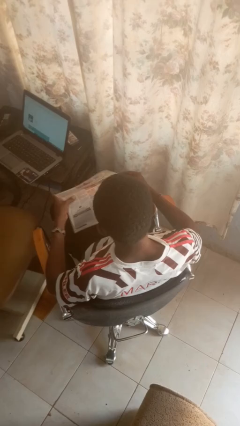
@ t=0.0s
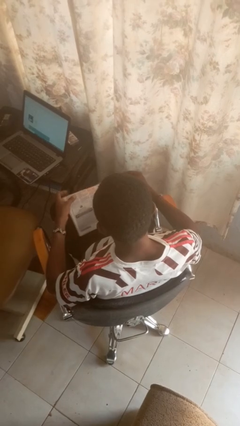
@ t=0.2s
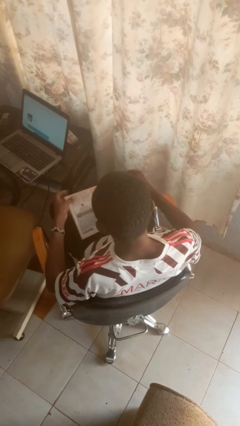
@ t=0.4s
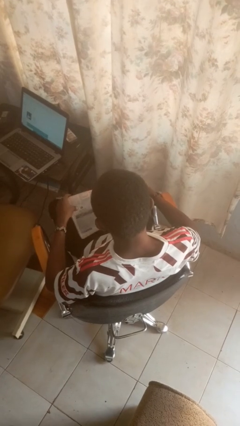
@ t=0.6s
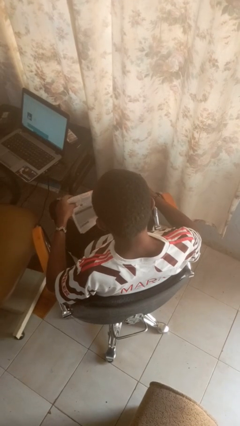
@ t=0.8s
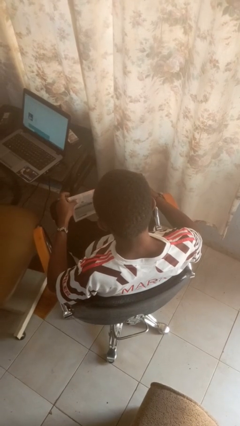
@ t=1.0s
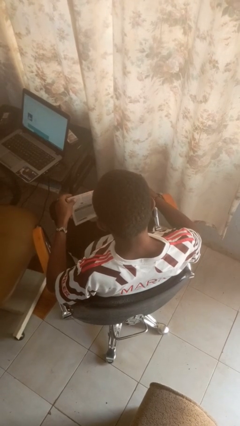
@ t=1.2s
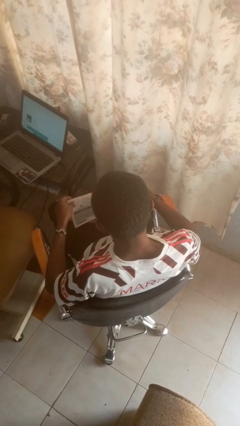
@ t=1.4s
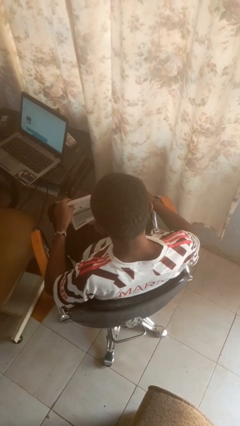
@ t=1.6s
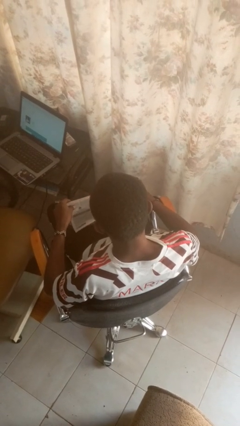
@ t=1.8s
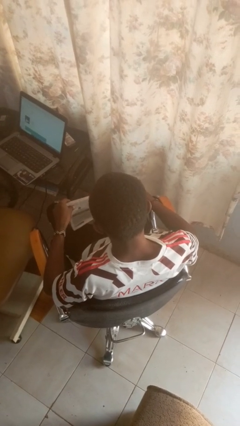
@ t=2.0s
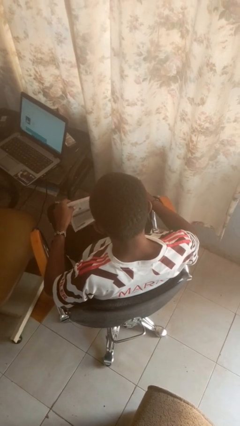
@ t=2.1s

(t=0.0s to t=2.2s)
person reads newspaper

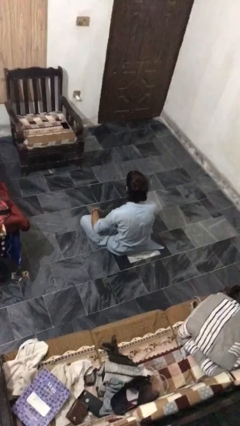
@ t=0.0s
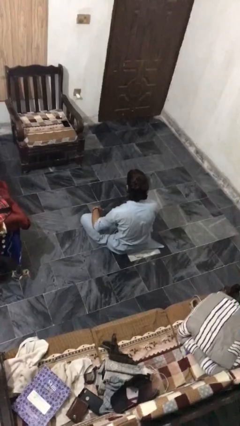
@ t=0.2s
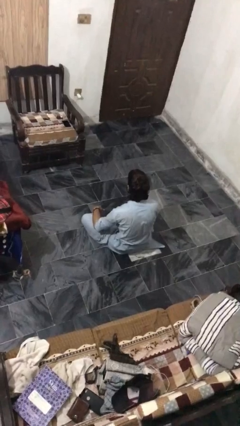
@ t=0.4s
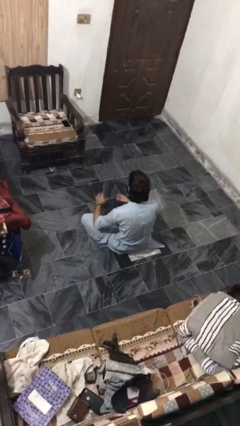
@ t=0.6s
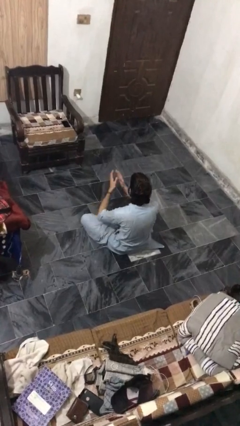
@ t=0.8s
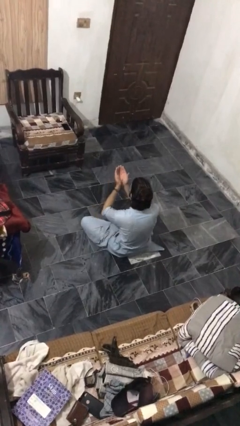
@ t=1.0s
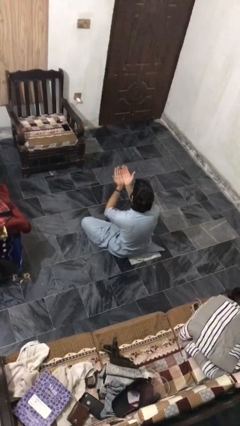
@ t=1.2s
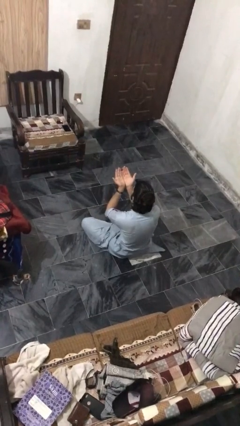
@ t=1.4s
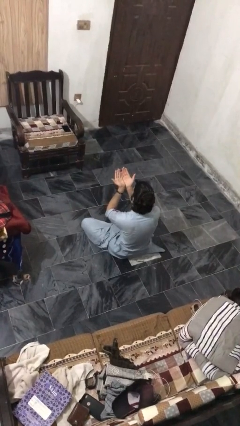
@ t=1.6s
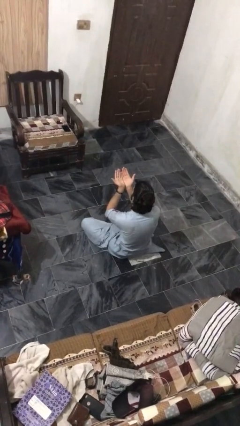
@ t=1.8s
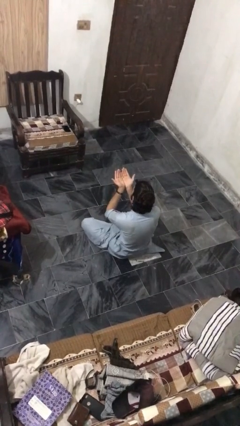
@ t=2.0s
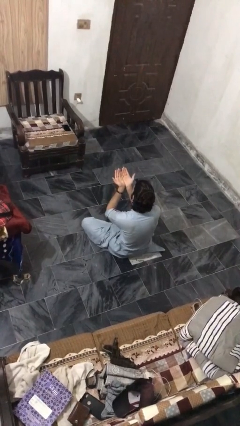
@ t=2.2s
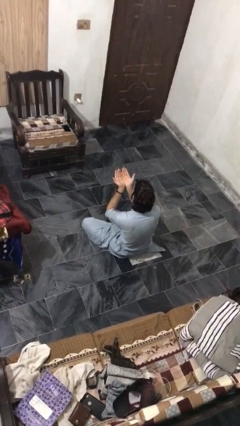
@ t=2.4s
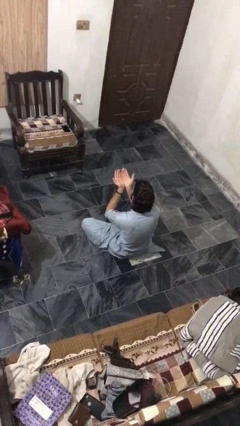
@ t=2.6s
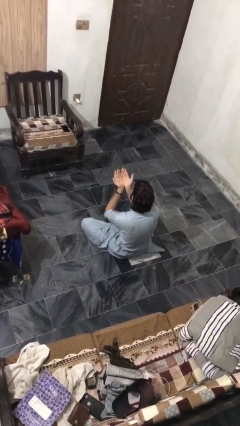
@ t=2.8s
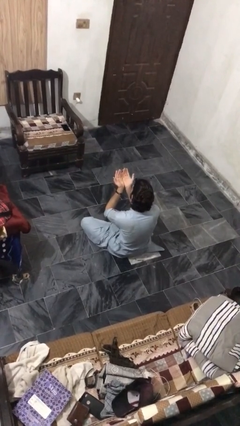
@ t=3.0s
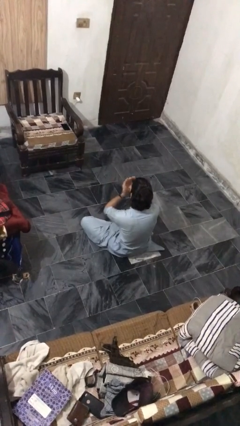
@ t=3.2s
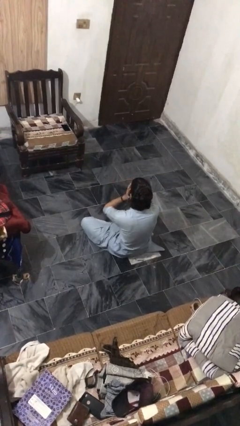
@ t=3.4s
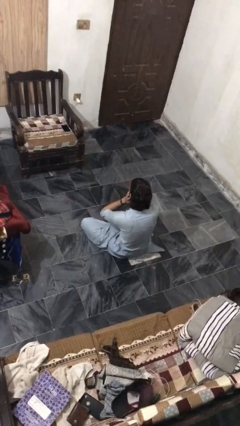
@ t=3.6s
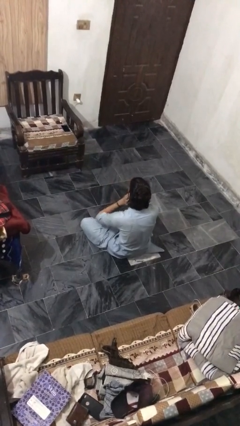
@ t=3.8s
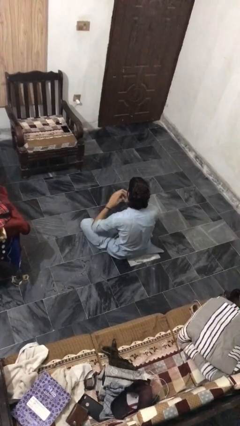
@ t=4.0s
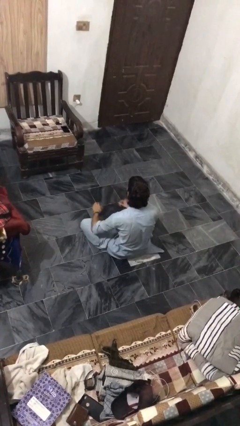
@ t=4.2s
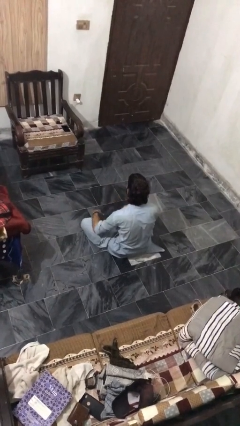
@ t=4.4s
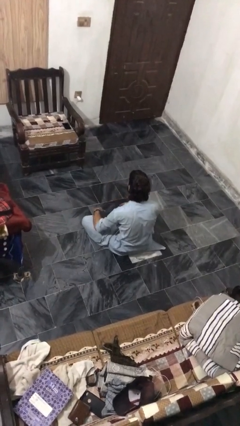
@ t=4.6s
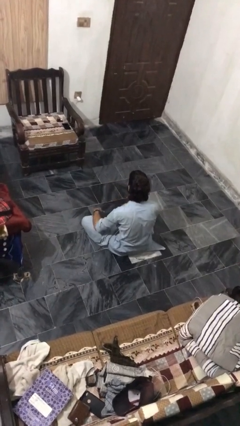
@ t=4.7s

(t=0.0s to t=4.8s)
person prays

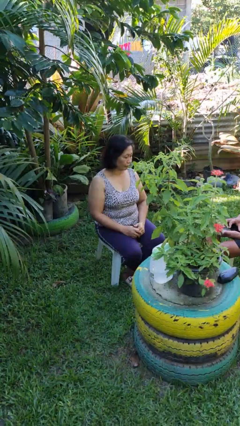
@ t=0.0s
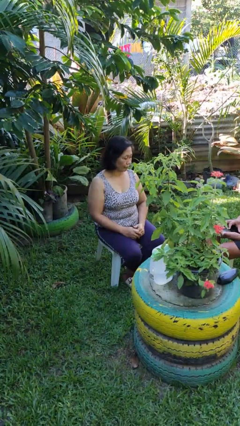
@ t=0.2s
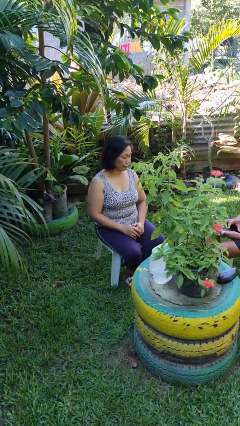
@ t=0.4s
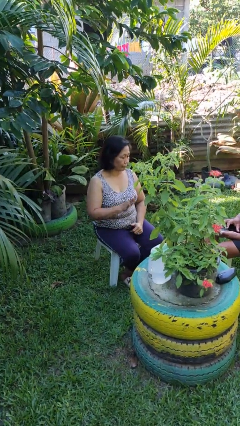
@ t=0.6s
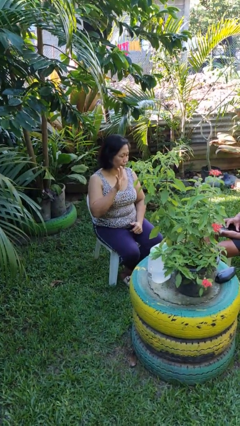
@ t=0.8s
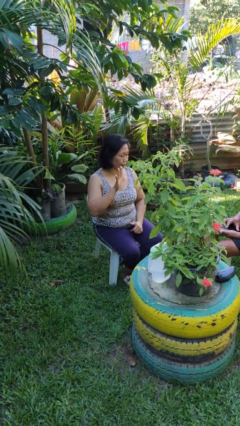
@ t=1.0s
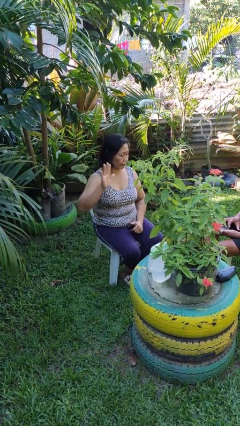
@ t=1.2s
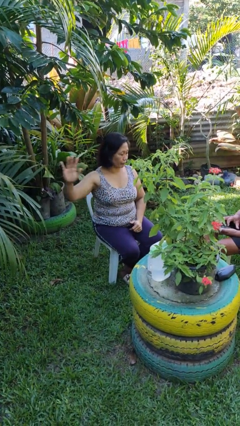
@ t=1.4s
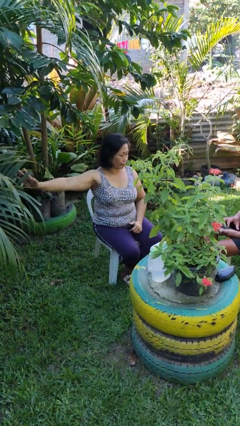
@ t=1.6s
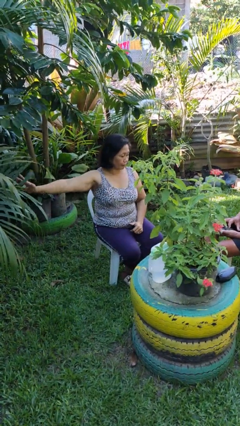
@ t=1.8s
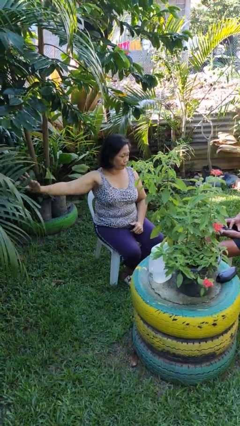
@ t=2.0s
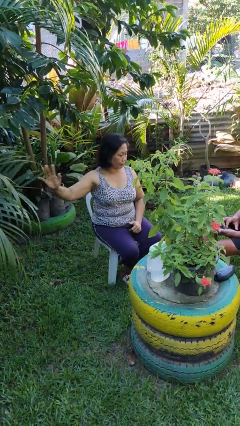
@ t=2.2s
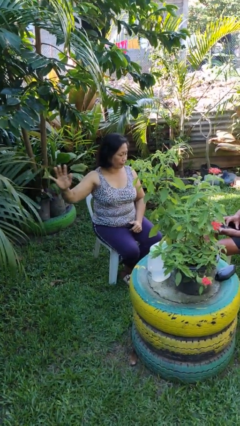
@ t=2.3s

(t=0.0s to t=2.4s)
person gestures swipe right

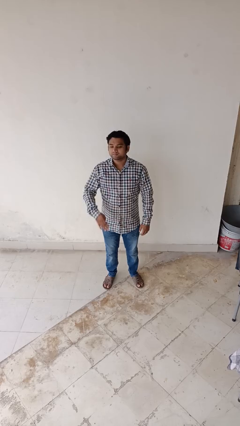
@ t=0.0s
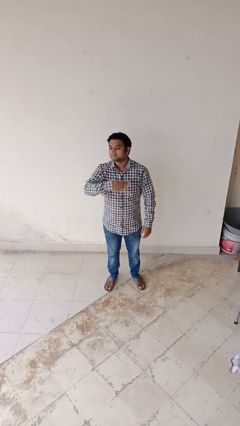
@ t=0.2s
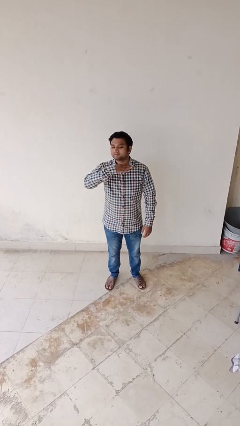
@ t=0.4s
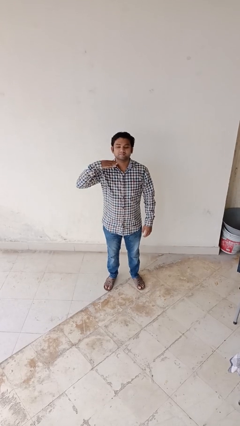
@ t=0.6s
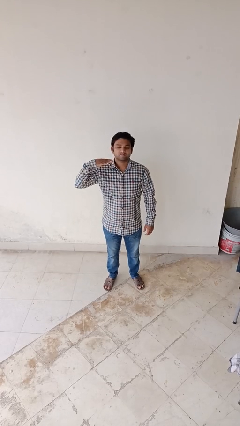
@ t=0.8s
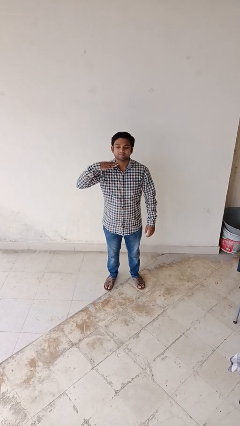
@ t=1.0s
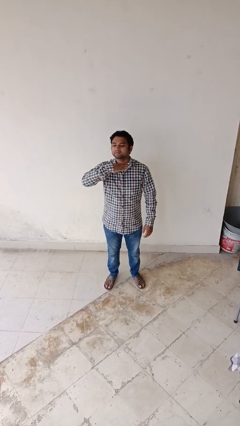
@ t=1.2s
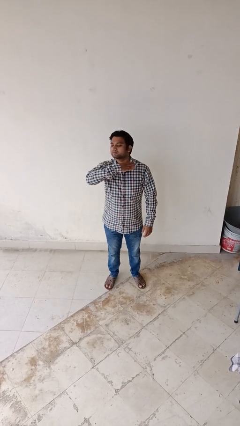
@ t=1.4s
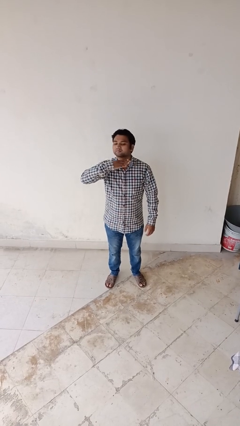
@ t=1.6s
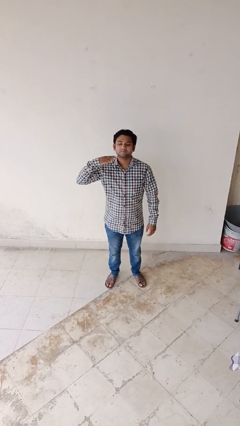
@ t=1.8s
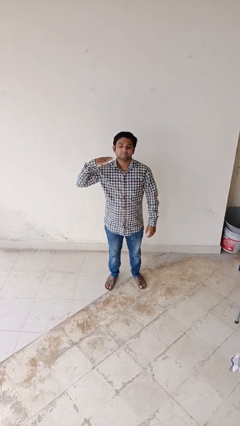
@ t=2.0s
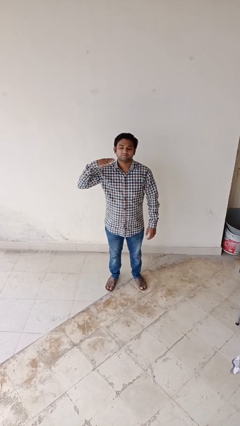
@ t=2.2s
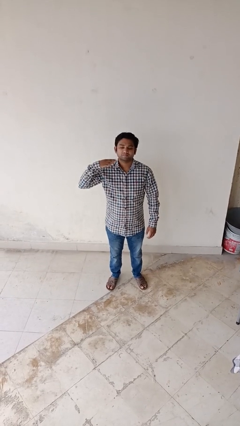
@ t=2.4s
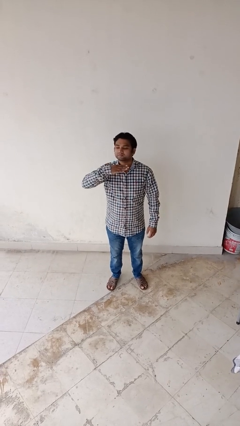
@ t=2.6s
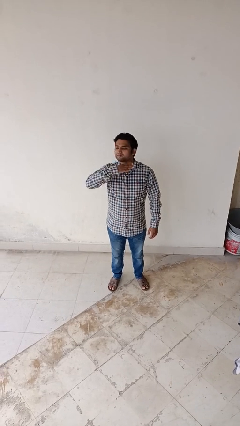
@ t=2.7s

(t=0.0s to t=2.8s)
person gestures cut

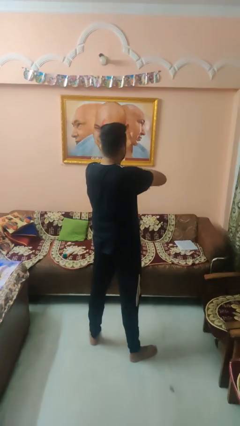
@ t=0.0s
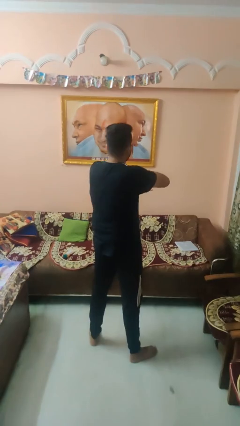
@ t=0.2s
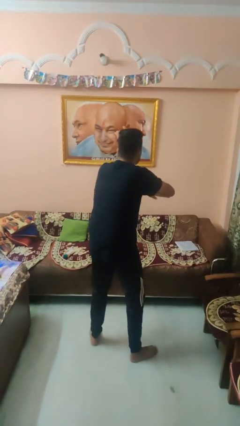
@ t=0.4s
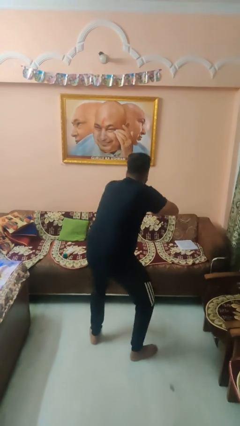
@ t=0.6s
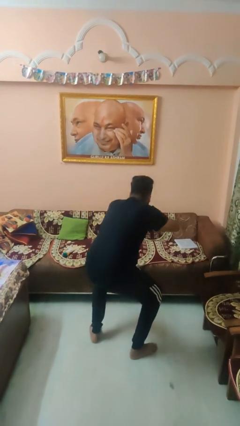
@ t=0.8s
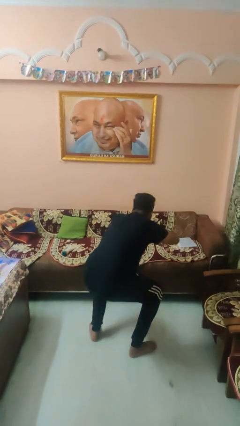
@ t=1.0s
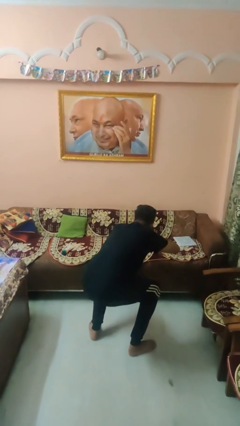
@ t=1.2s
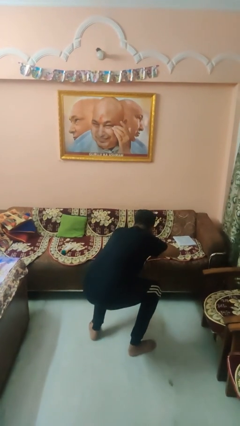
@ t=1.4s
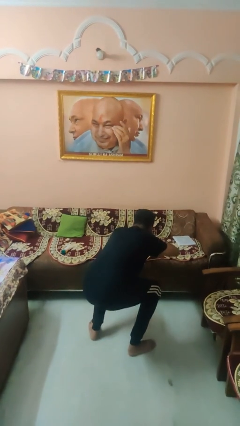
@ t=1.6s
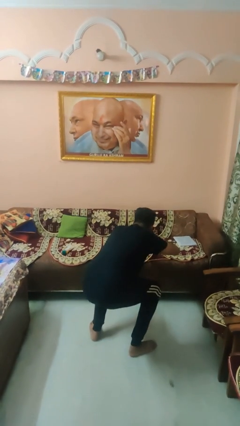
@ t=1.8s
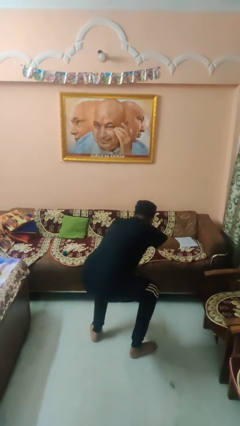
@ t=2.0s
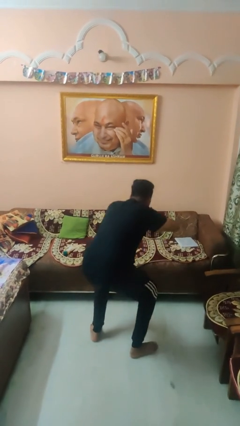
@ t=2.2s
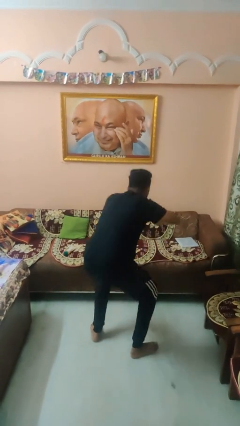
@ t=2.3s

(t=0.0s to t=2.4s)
person exercises with situp

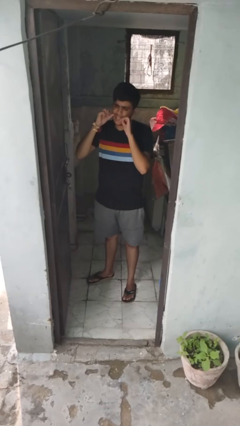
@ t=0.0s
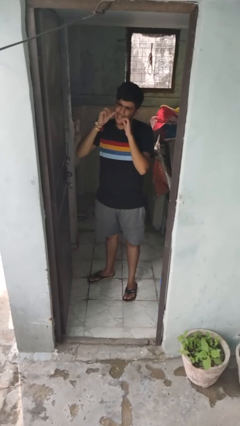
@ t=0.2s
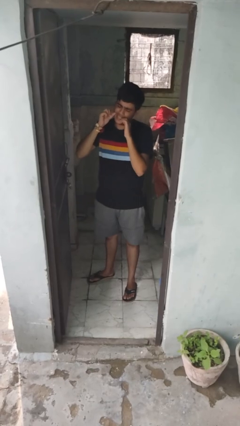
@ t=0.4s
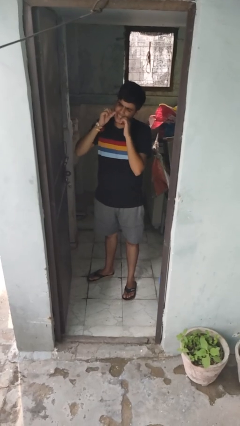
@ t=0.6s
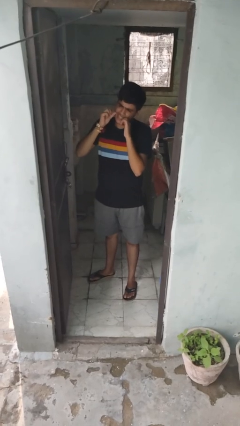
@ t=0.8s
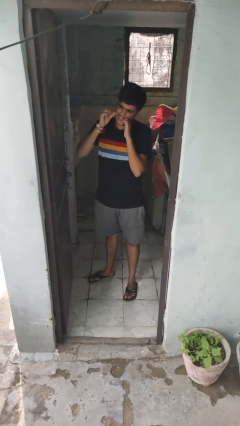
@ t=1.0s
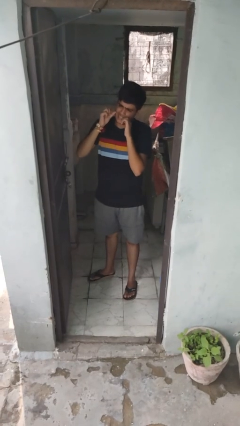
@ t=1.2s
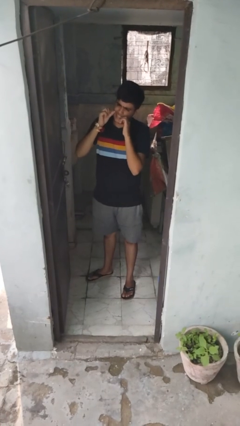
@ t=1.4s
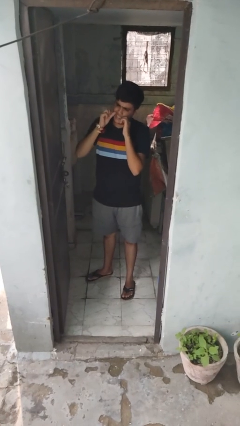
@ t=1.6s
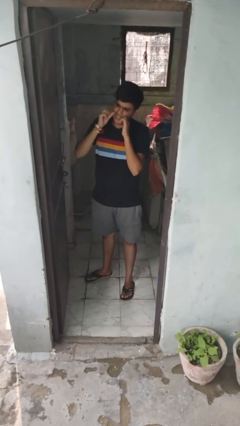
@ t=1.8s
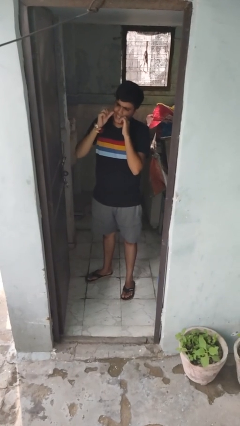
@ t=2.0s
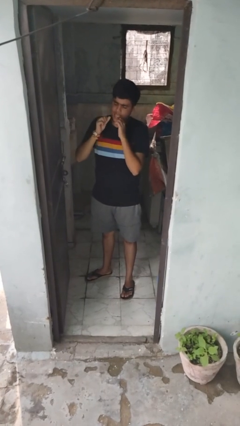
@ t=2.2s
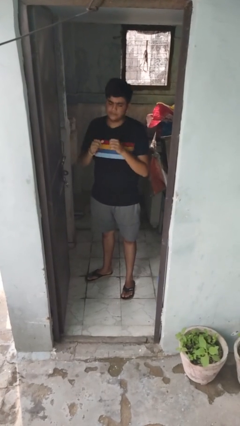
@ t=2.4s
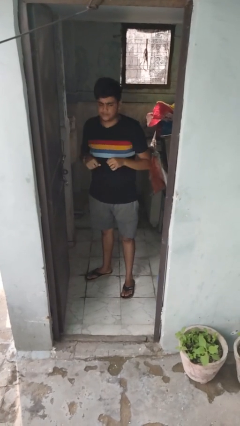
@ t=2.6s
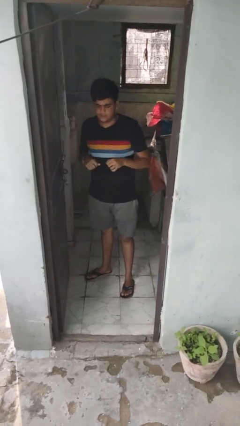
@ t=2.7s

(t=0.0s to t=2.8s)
person flosses
